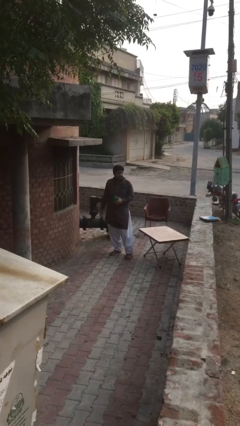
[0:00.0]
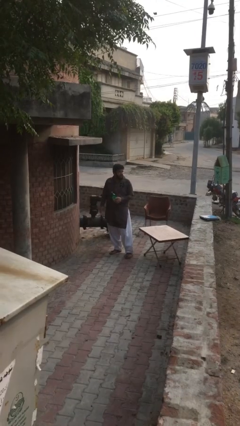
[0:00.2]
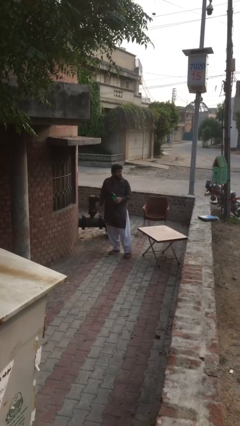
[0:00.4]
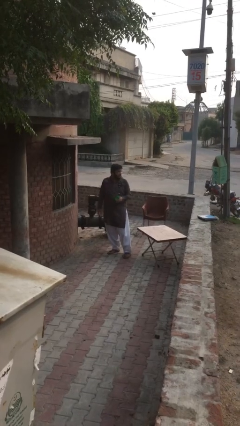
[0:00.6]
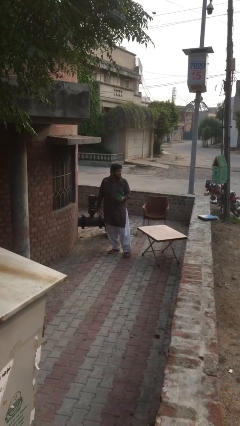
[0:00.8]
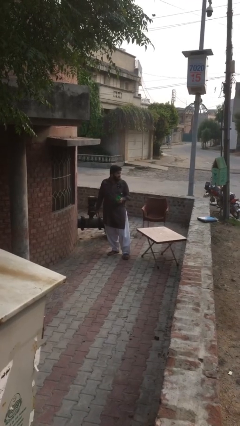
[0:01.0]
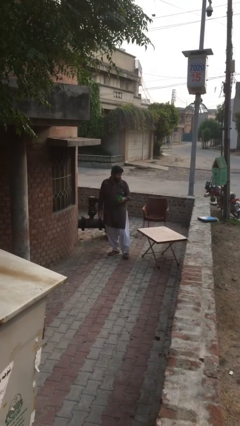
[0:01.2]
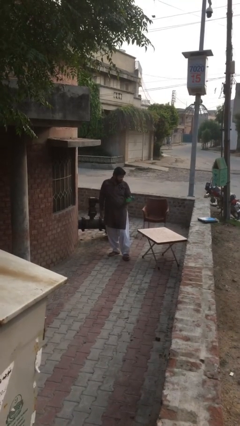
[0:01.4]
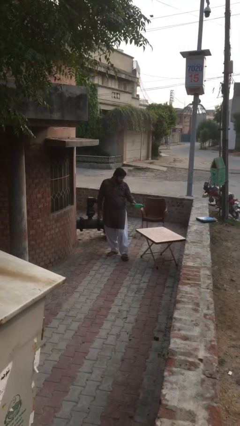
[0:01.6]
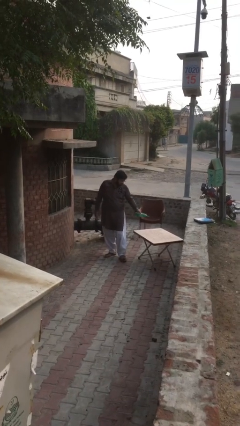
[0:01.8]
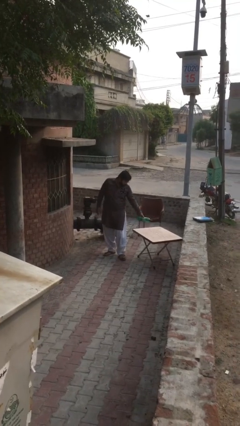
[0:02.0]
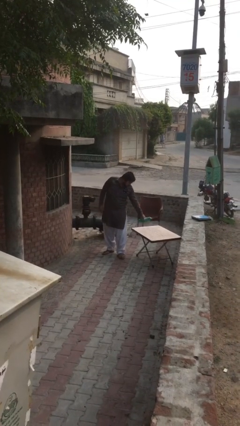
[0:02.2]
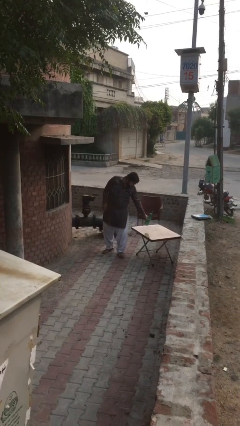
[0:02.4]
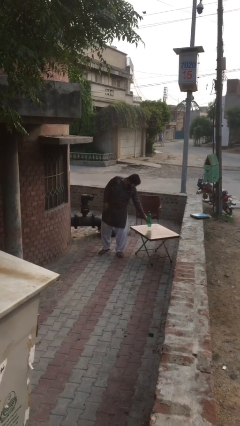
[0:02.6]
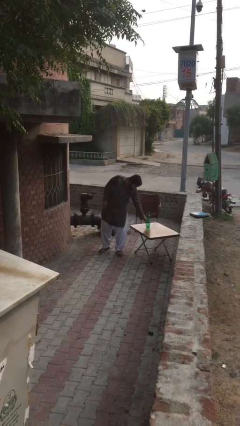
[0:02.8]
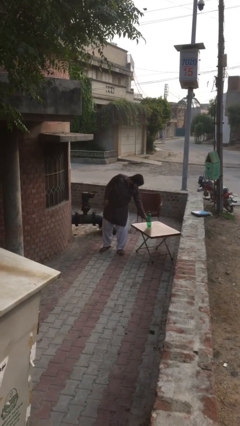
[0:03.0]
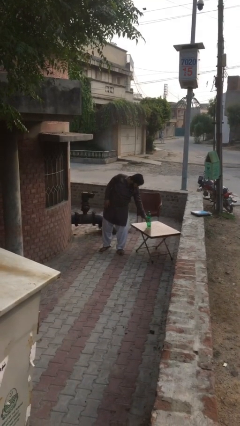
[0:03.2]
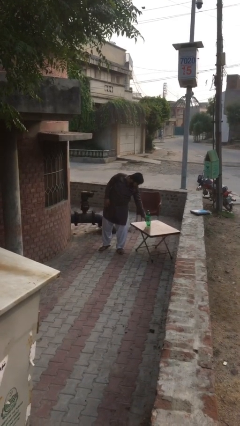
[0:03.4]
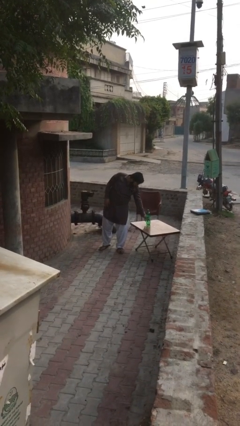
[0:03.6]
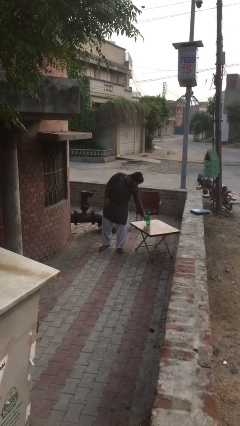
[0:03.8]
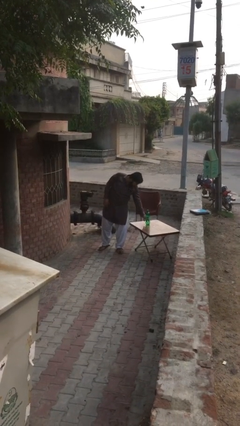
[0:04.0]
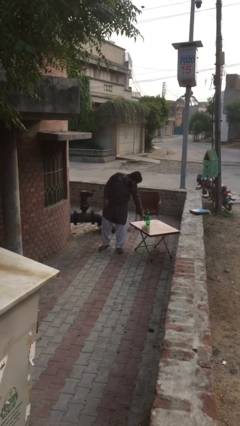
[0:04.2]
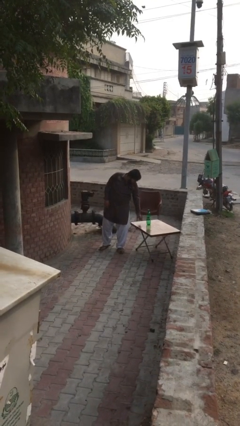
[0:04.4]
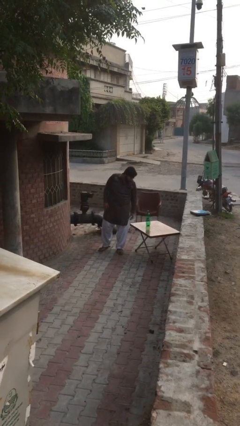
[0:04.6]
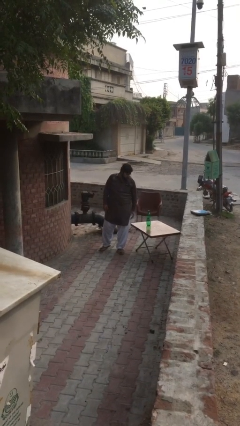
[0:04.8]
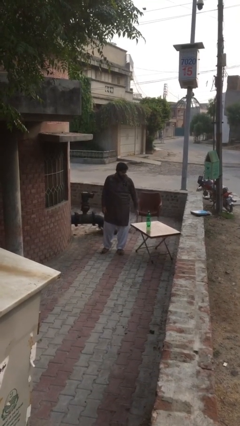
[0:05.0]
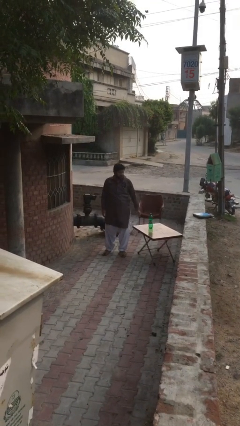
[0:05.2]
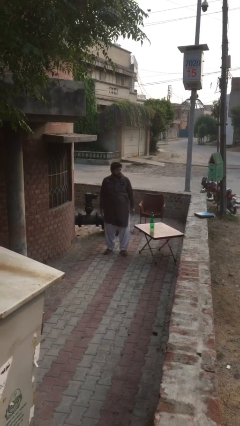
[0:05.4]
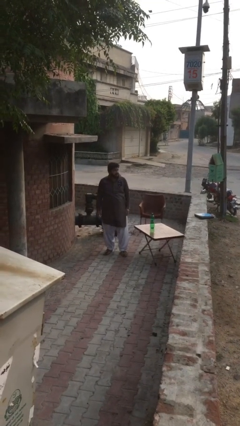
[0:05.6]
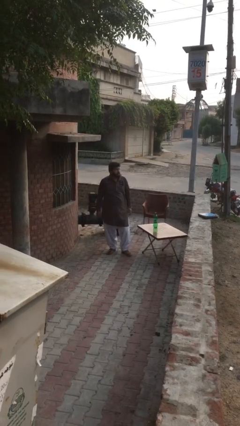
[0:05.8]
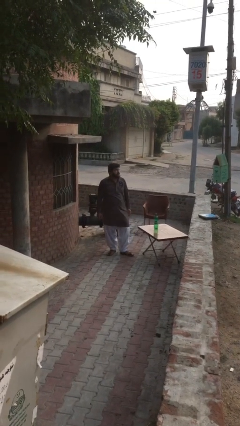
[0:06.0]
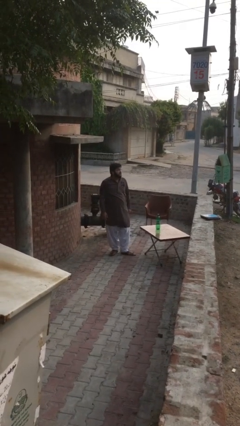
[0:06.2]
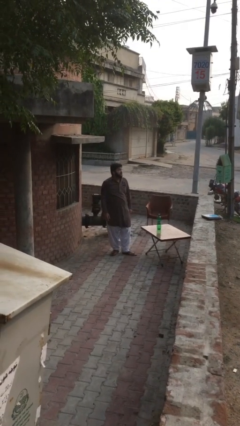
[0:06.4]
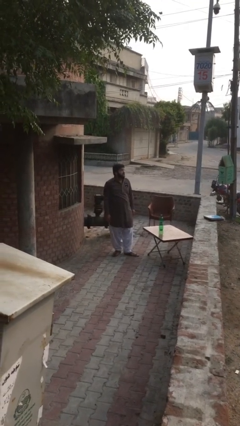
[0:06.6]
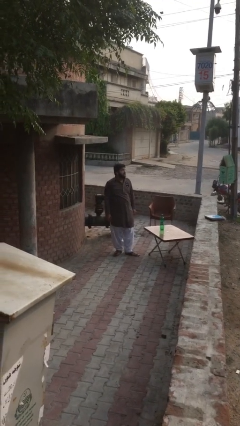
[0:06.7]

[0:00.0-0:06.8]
person puts down object on table

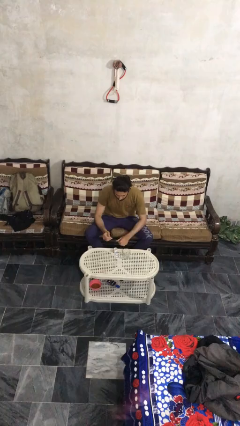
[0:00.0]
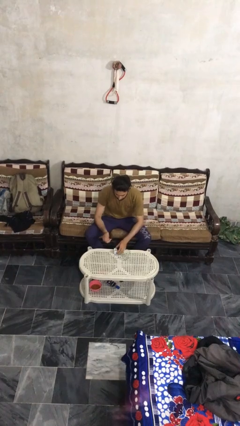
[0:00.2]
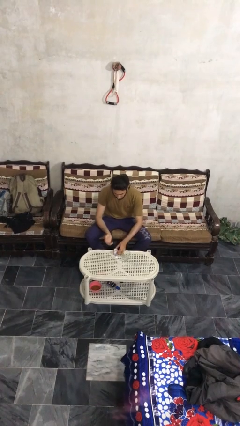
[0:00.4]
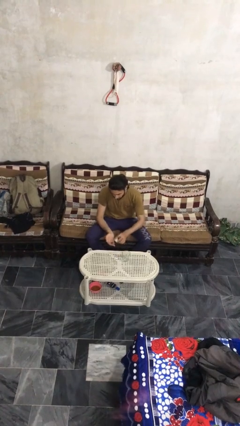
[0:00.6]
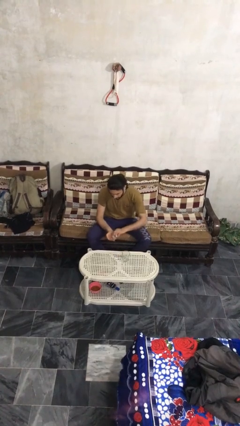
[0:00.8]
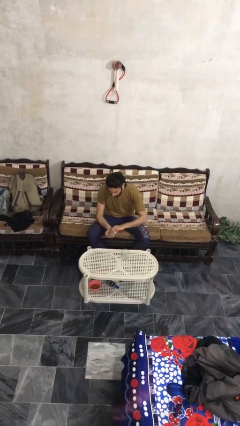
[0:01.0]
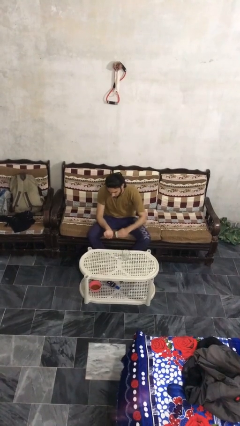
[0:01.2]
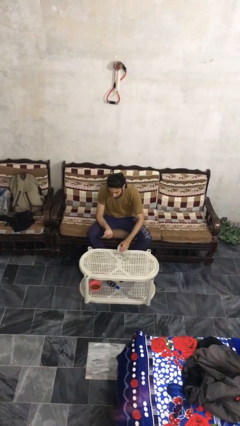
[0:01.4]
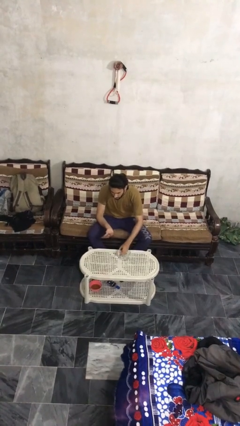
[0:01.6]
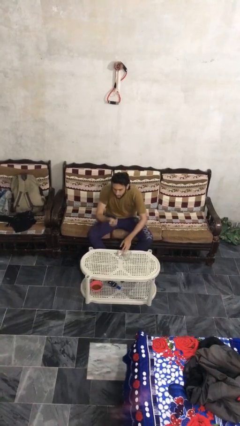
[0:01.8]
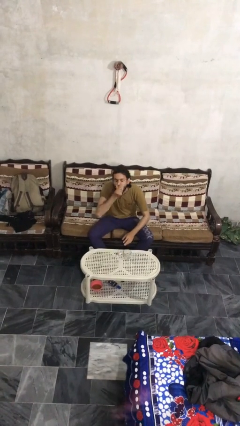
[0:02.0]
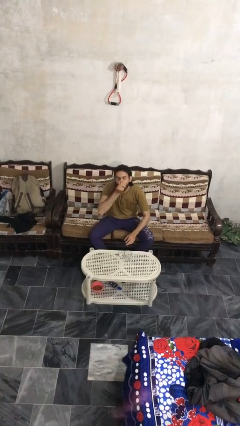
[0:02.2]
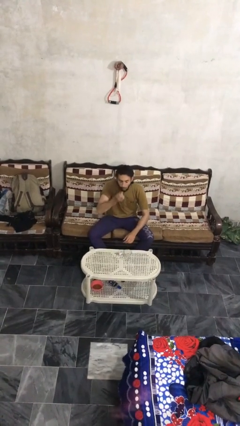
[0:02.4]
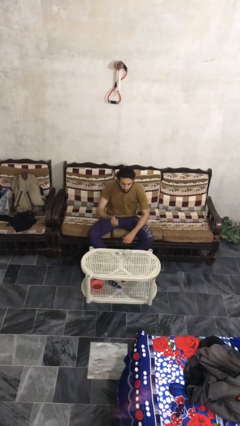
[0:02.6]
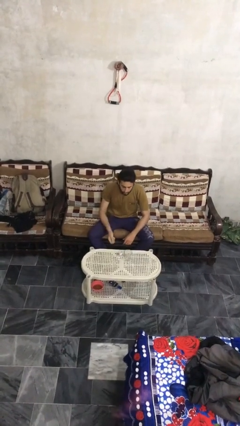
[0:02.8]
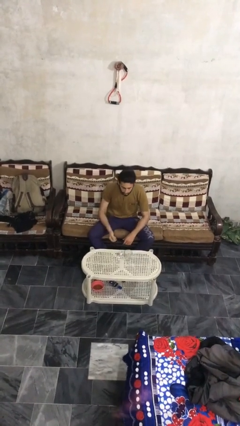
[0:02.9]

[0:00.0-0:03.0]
person takes medicine pills

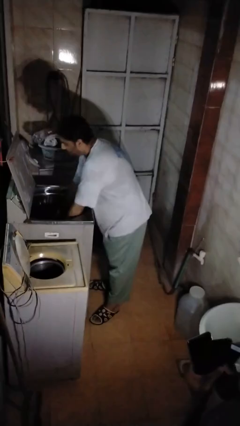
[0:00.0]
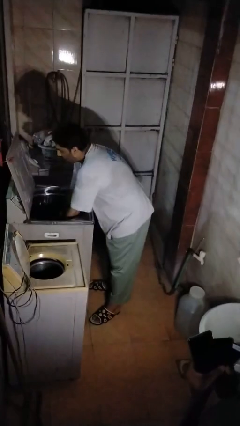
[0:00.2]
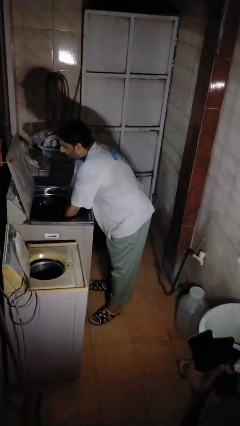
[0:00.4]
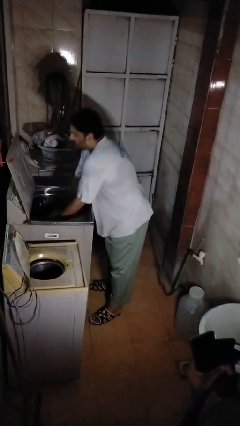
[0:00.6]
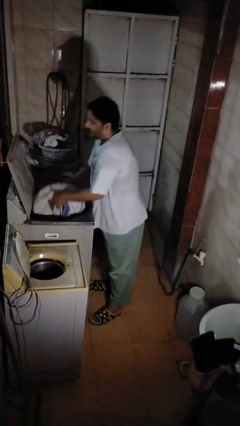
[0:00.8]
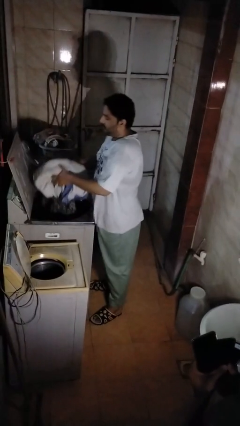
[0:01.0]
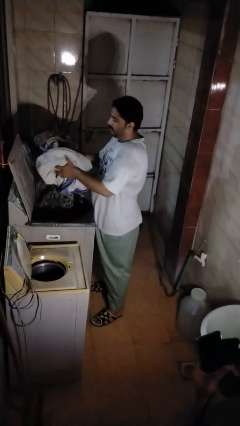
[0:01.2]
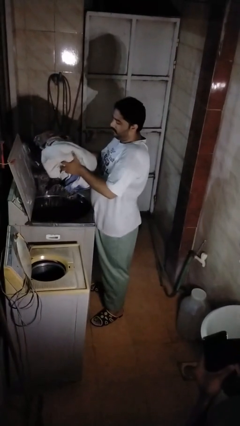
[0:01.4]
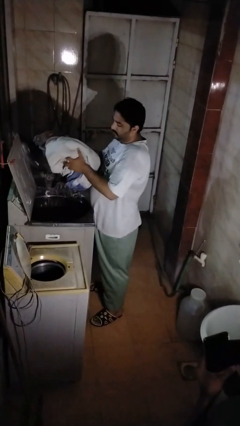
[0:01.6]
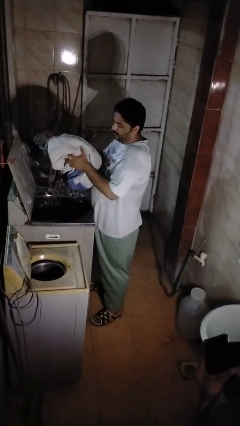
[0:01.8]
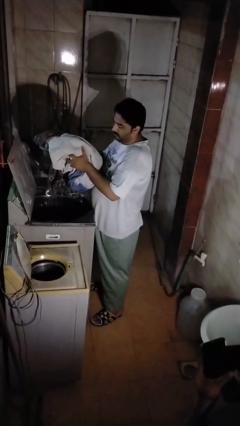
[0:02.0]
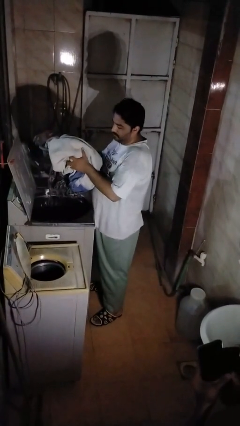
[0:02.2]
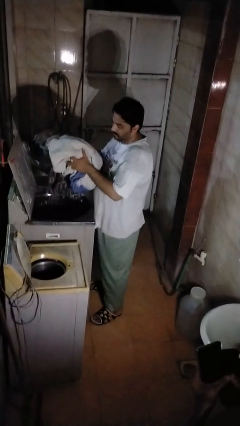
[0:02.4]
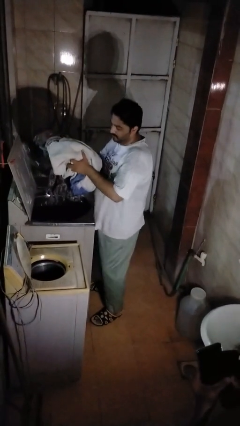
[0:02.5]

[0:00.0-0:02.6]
person unloads clotheswasher

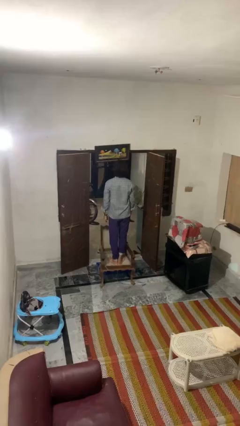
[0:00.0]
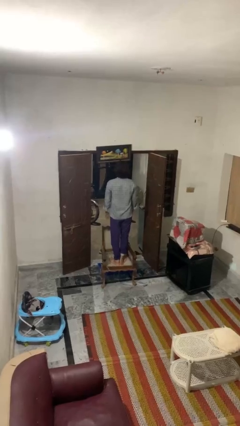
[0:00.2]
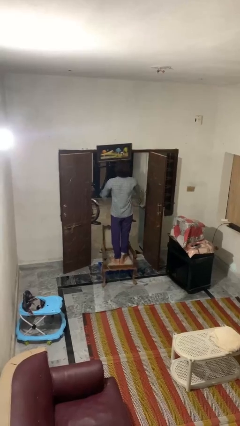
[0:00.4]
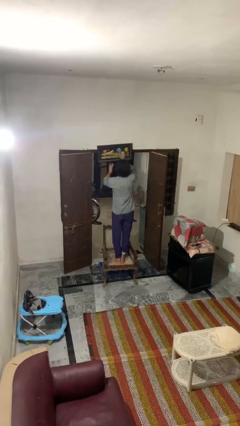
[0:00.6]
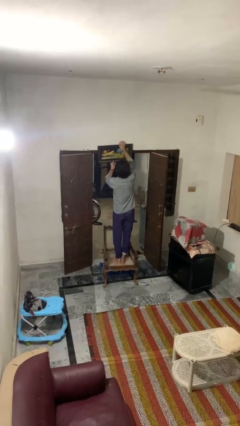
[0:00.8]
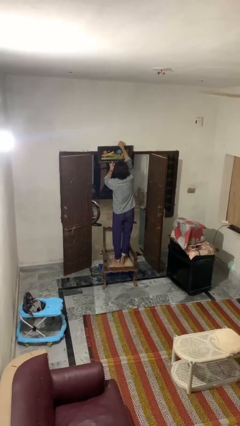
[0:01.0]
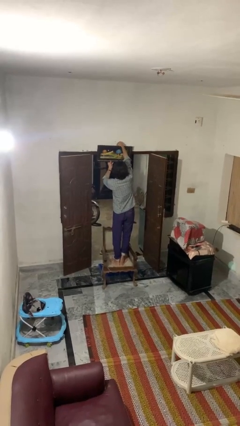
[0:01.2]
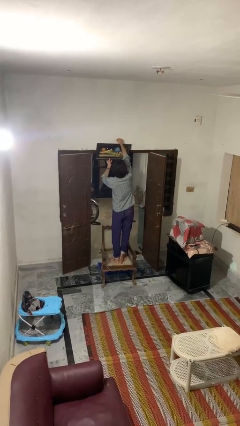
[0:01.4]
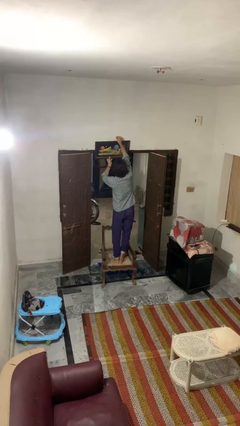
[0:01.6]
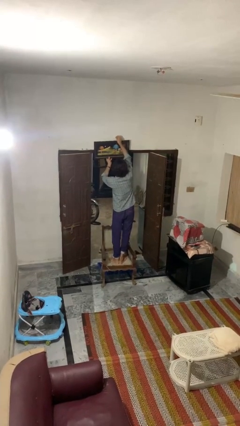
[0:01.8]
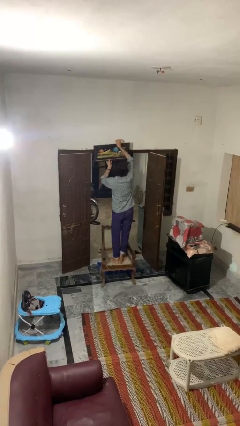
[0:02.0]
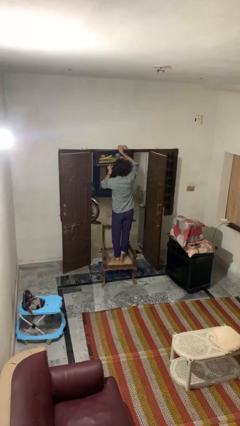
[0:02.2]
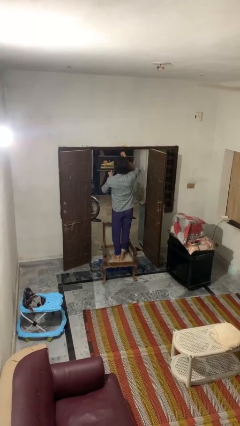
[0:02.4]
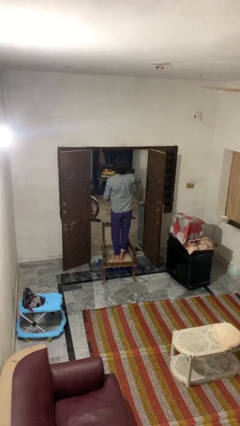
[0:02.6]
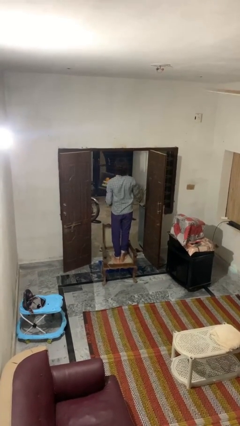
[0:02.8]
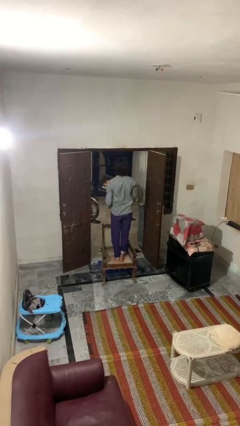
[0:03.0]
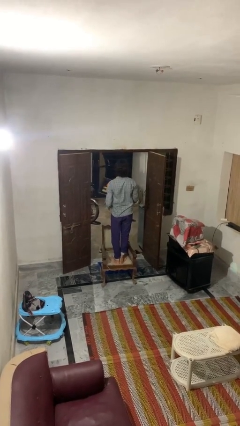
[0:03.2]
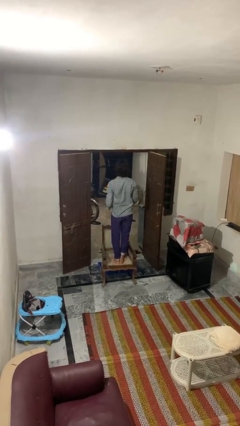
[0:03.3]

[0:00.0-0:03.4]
person takes down picture frame

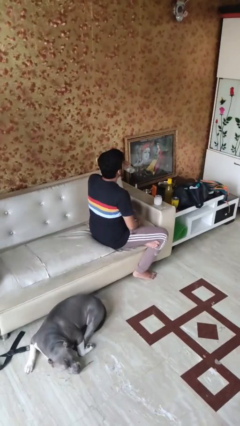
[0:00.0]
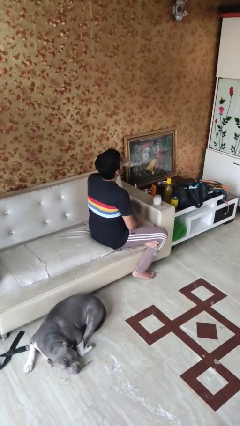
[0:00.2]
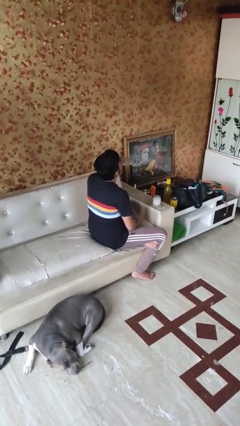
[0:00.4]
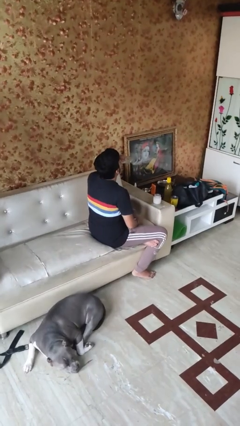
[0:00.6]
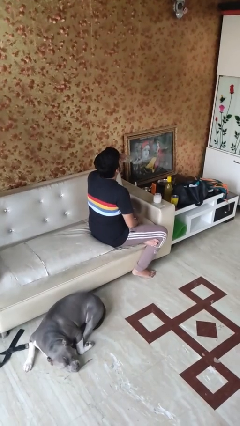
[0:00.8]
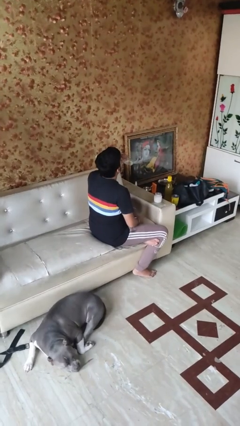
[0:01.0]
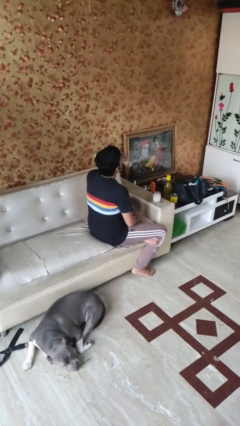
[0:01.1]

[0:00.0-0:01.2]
person drinks from cup

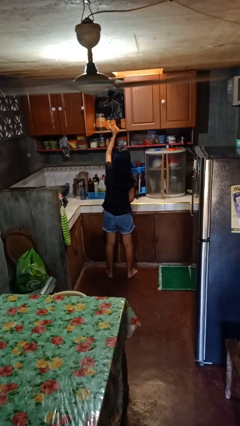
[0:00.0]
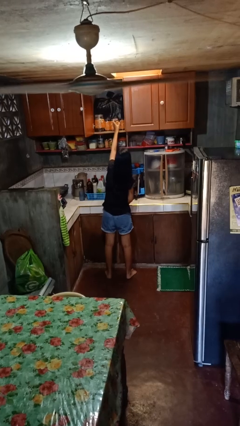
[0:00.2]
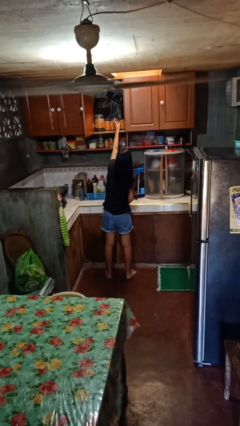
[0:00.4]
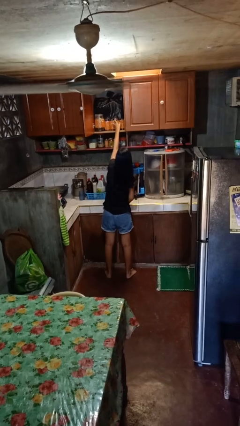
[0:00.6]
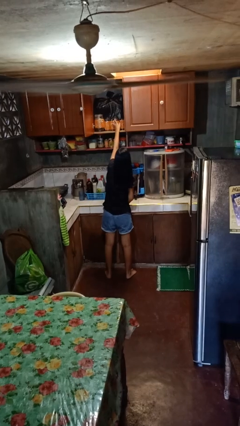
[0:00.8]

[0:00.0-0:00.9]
person puts down object into cabinet
